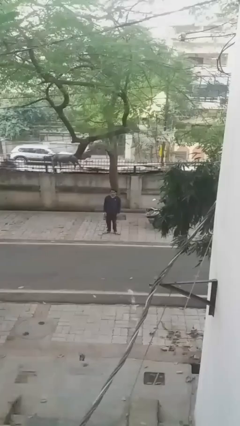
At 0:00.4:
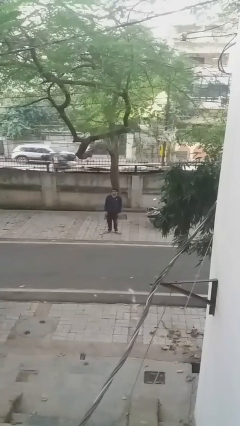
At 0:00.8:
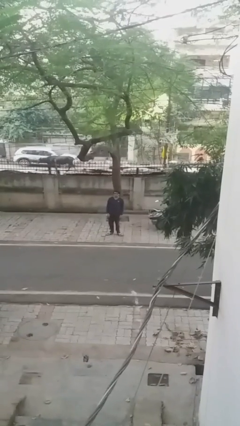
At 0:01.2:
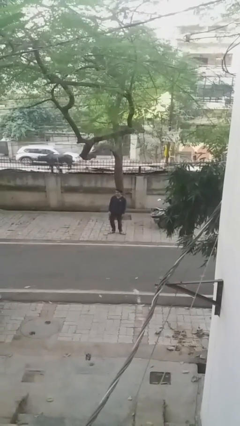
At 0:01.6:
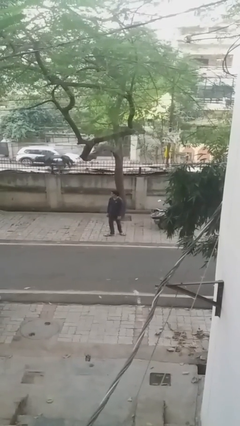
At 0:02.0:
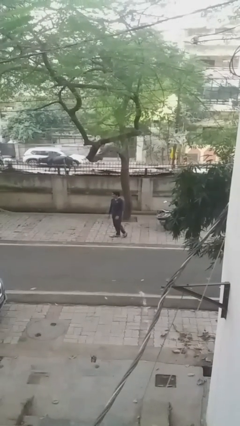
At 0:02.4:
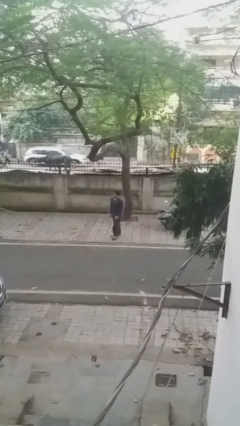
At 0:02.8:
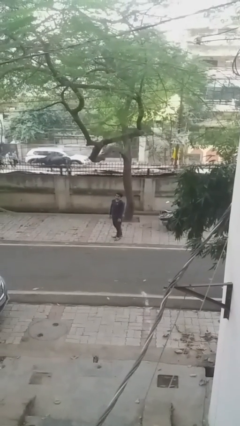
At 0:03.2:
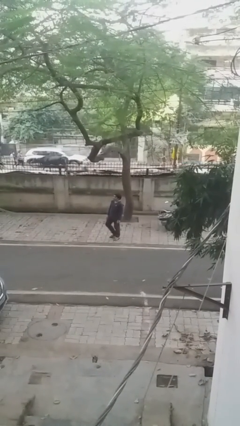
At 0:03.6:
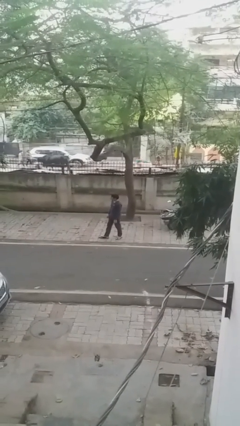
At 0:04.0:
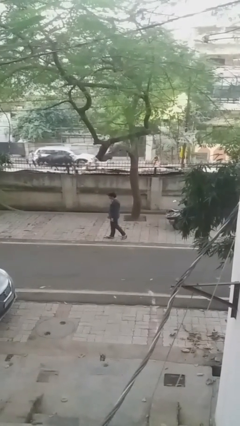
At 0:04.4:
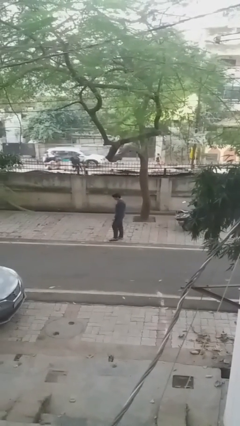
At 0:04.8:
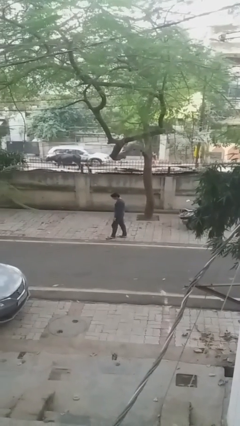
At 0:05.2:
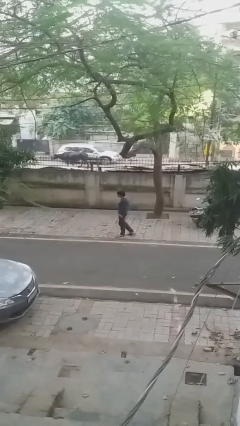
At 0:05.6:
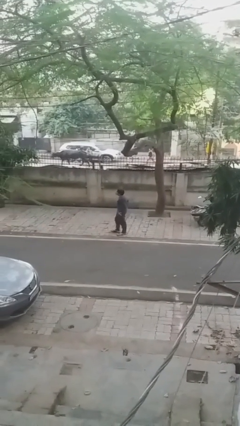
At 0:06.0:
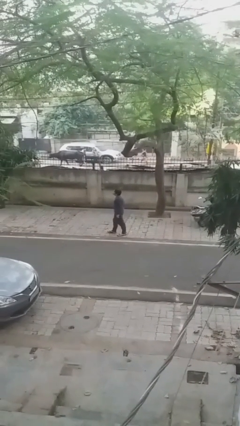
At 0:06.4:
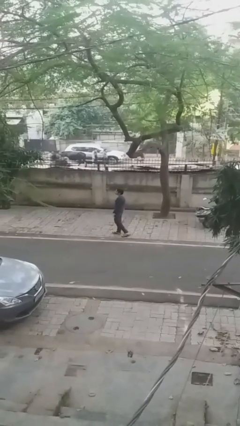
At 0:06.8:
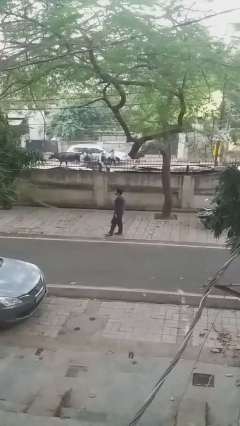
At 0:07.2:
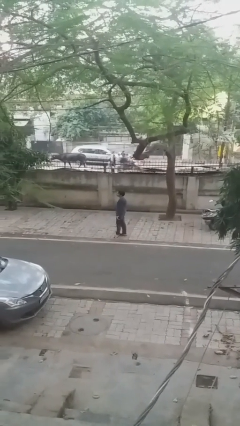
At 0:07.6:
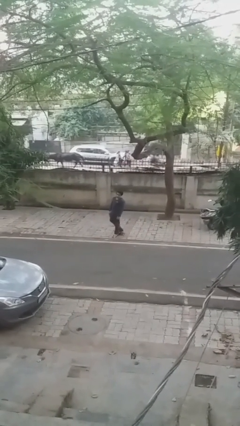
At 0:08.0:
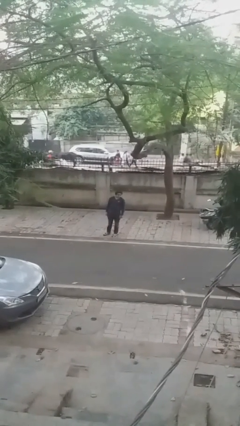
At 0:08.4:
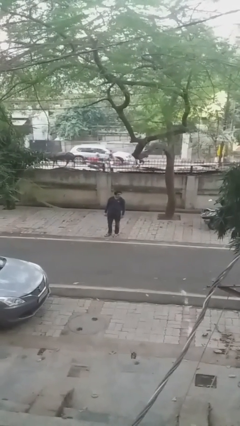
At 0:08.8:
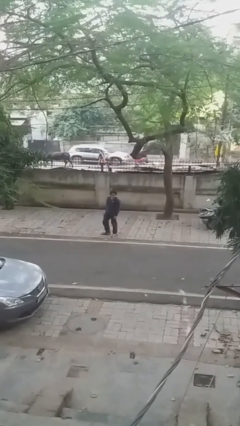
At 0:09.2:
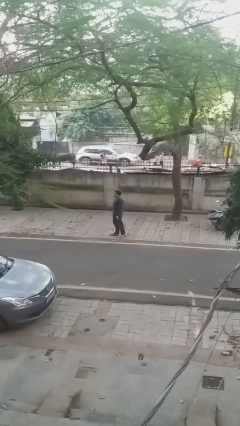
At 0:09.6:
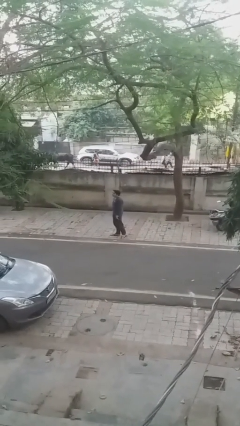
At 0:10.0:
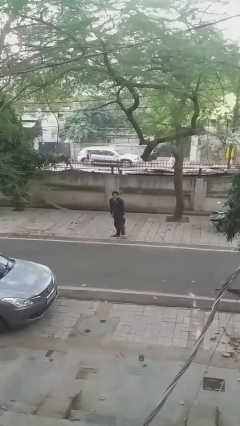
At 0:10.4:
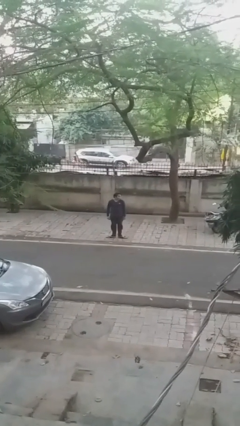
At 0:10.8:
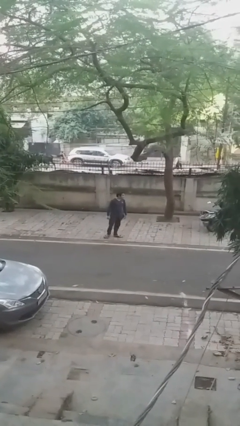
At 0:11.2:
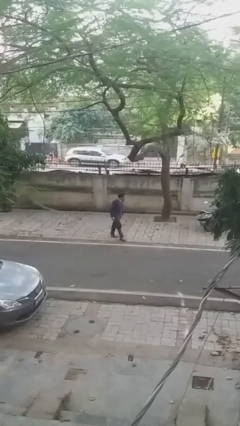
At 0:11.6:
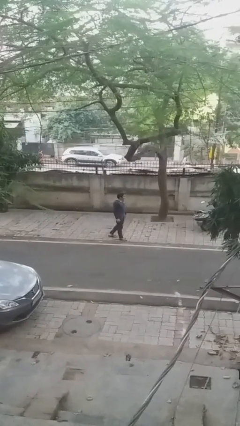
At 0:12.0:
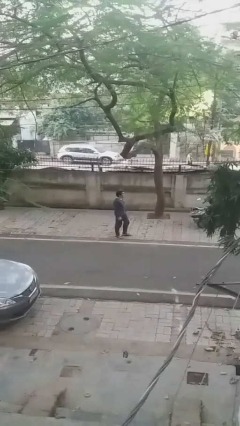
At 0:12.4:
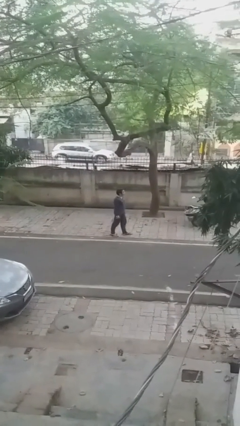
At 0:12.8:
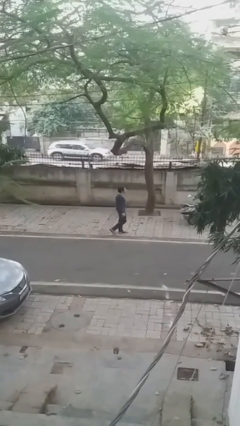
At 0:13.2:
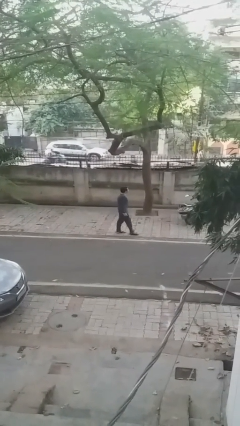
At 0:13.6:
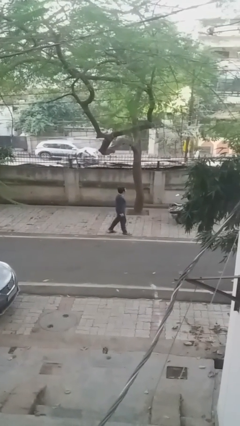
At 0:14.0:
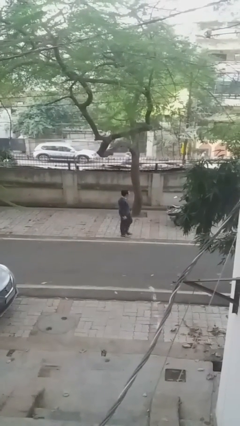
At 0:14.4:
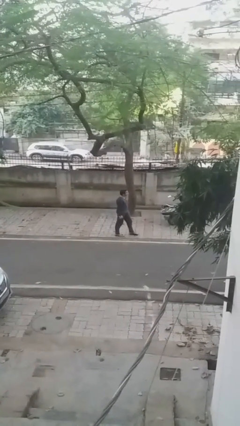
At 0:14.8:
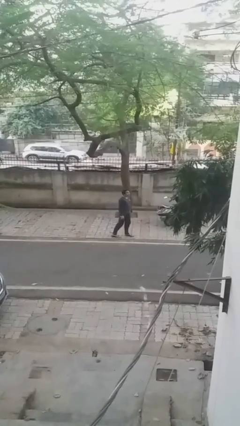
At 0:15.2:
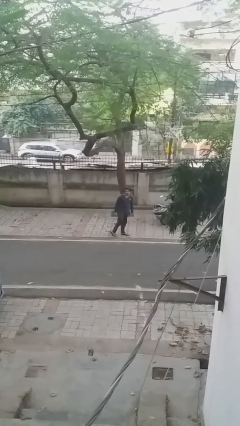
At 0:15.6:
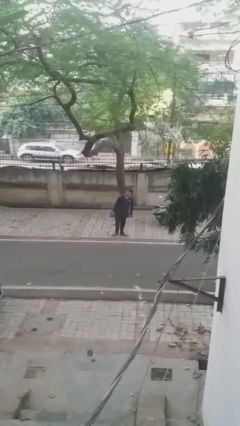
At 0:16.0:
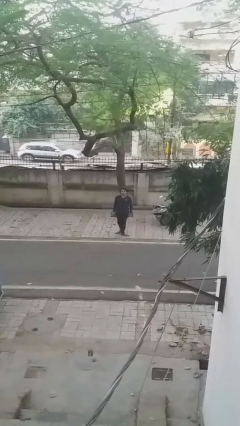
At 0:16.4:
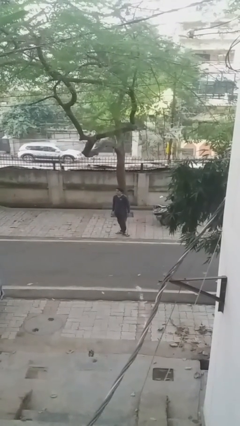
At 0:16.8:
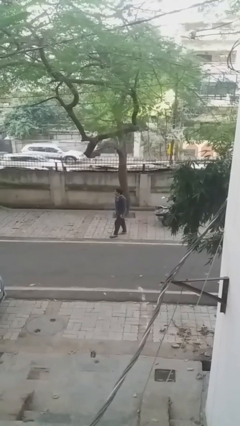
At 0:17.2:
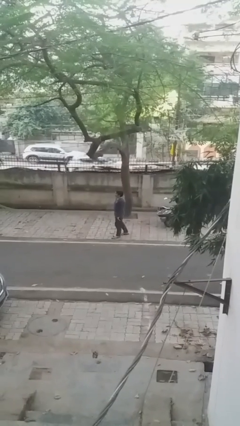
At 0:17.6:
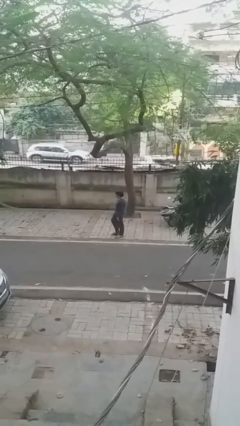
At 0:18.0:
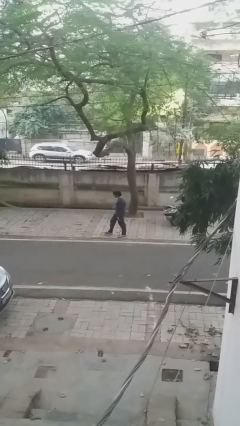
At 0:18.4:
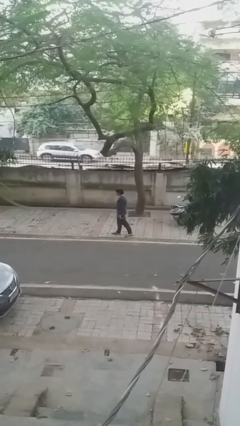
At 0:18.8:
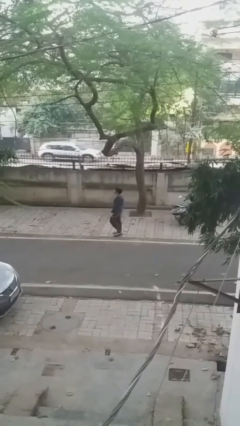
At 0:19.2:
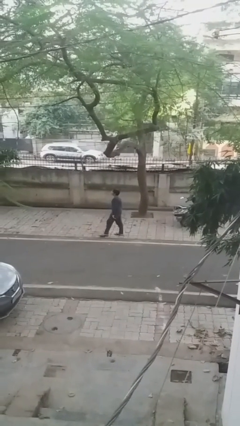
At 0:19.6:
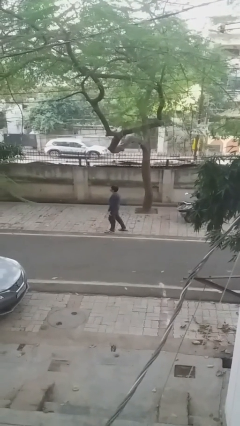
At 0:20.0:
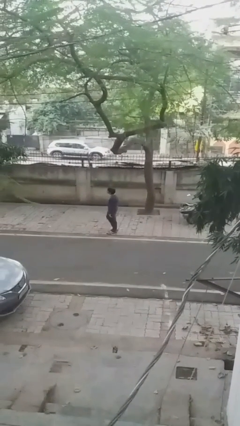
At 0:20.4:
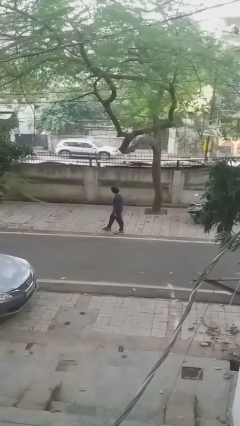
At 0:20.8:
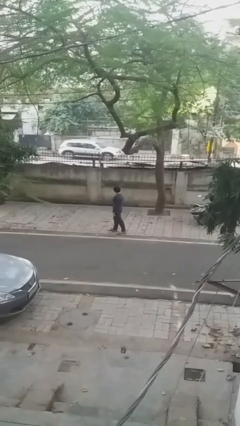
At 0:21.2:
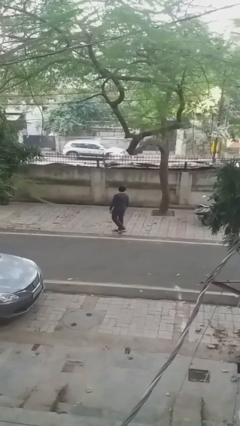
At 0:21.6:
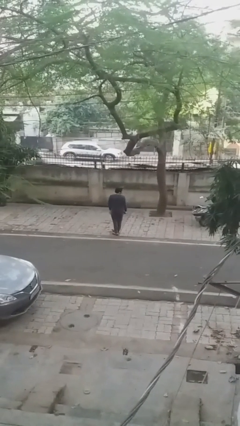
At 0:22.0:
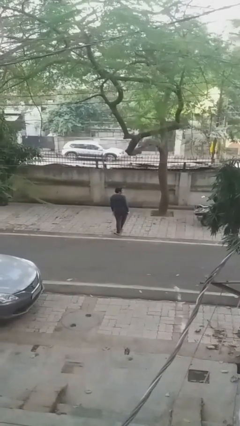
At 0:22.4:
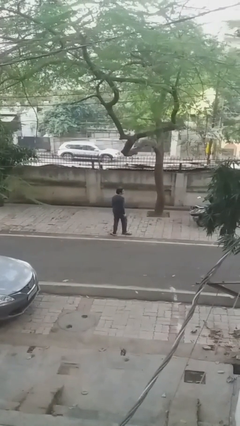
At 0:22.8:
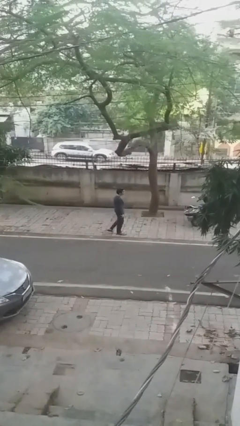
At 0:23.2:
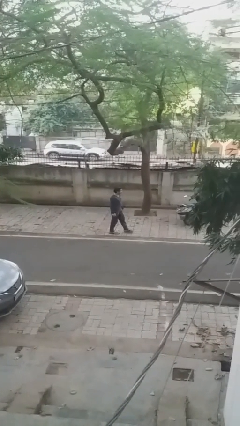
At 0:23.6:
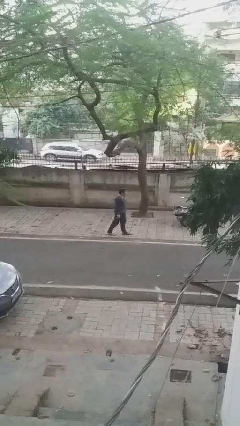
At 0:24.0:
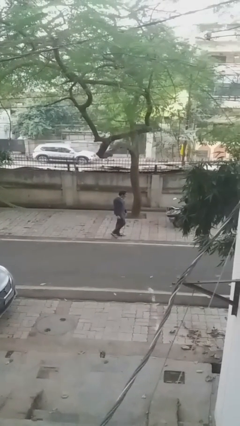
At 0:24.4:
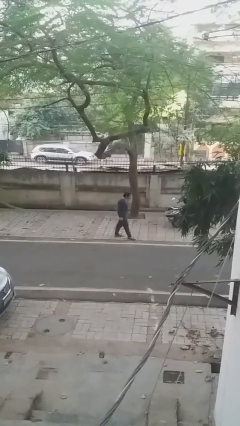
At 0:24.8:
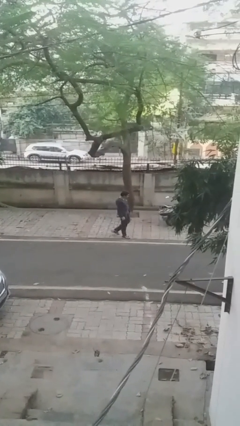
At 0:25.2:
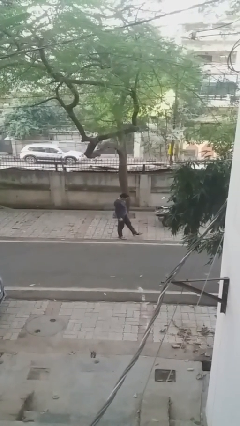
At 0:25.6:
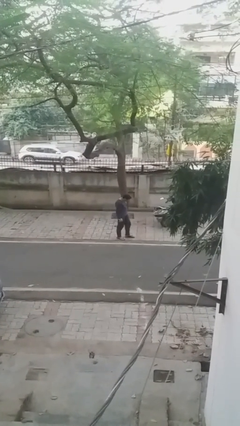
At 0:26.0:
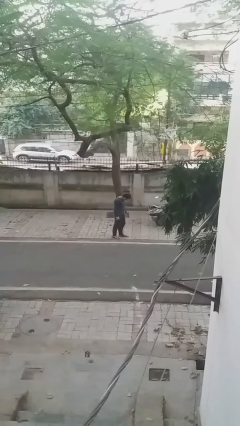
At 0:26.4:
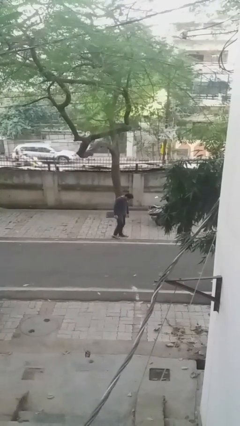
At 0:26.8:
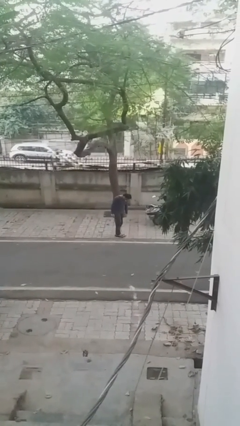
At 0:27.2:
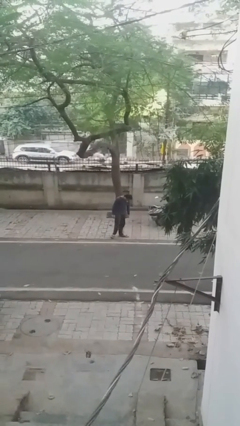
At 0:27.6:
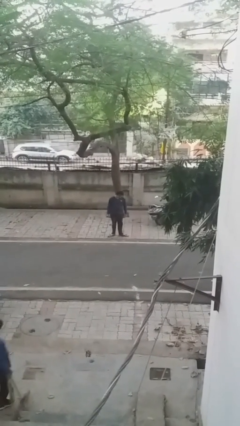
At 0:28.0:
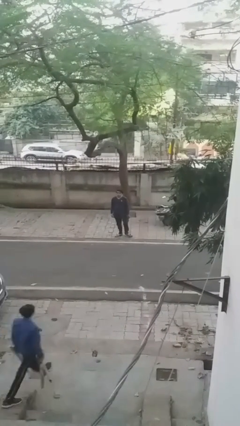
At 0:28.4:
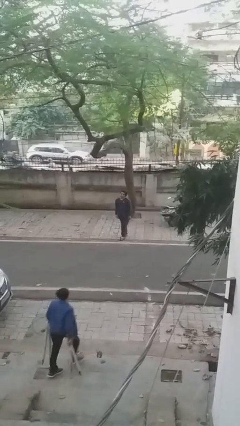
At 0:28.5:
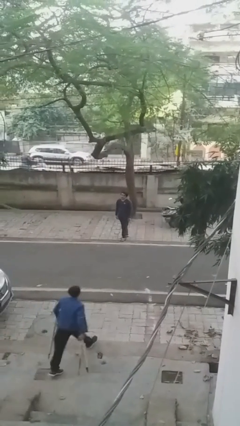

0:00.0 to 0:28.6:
person walks

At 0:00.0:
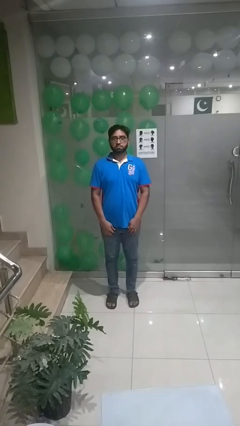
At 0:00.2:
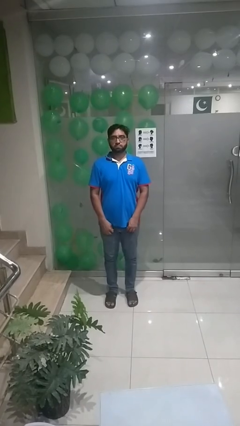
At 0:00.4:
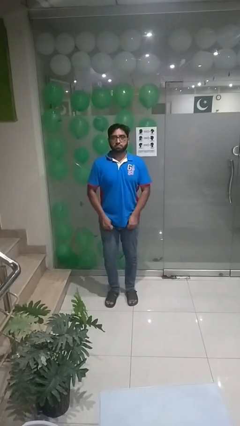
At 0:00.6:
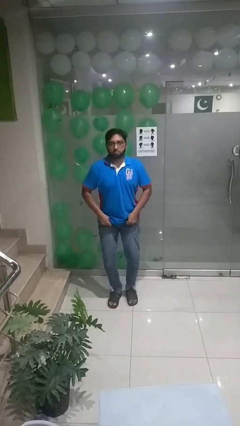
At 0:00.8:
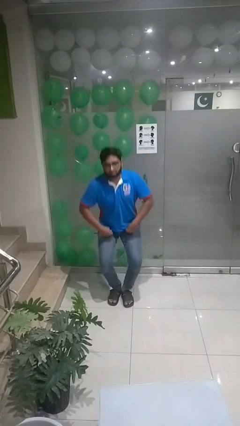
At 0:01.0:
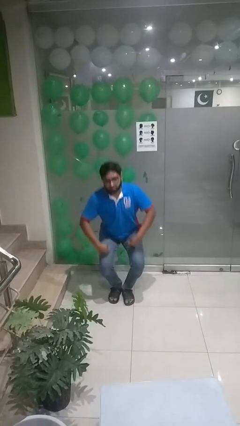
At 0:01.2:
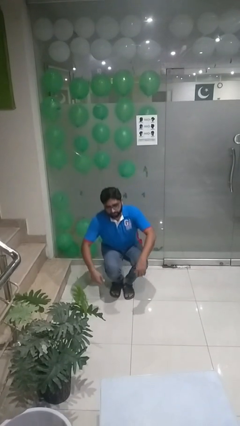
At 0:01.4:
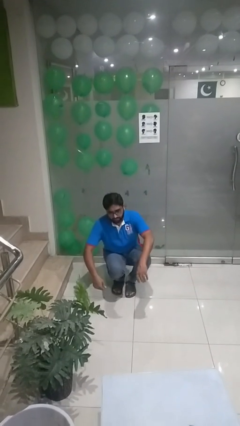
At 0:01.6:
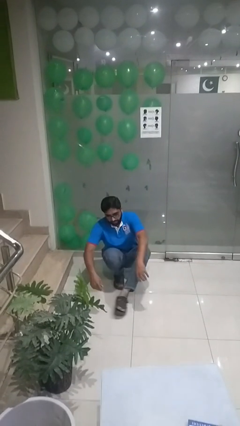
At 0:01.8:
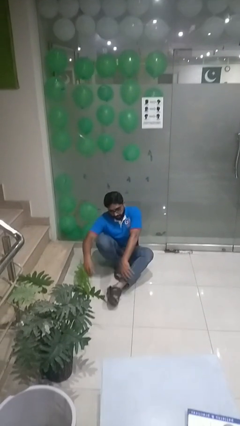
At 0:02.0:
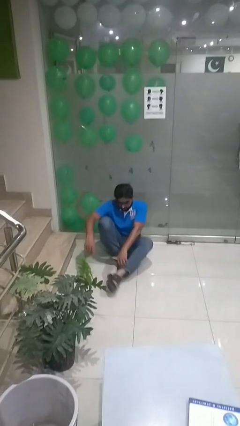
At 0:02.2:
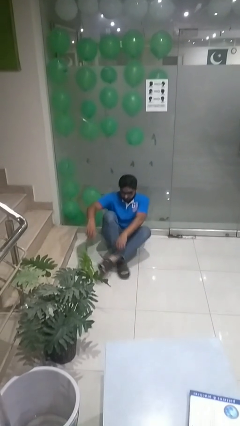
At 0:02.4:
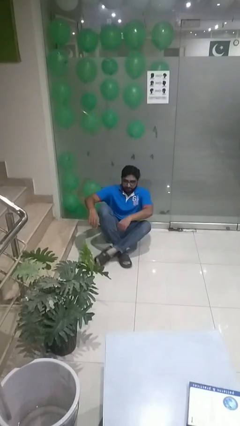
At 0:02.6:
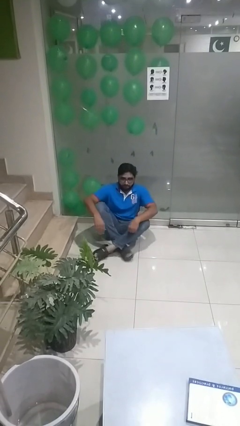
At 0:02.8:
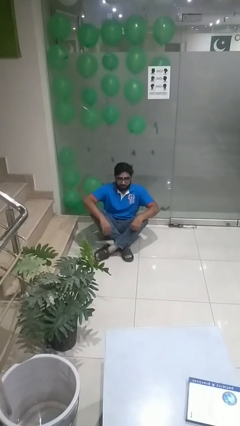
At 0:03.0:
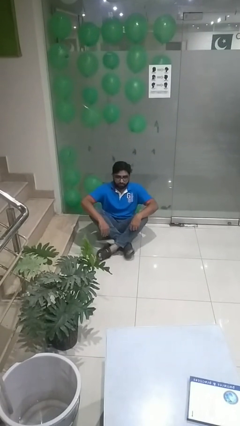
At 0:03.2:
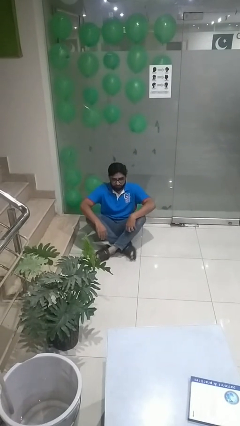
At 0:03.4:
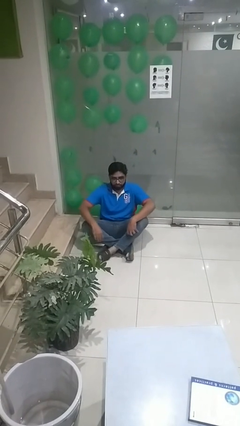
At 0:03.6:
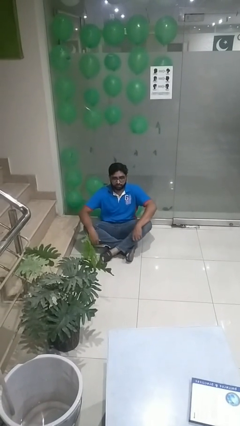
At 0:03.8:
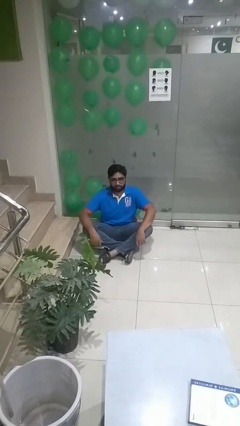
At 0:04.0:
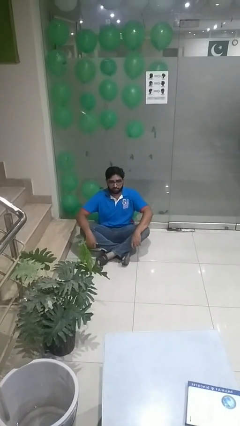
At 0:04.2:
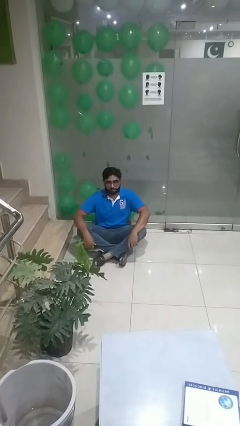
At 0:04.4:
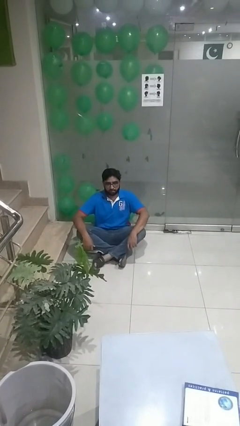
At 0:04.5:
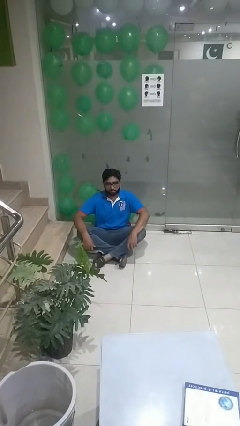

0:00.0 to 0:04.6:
person sits crisscross
